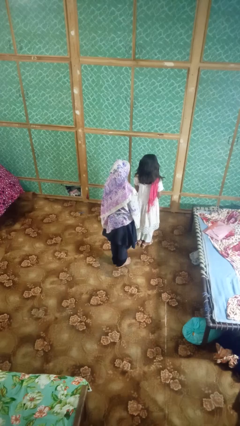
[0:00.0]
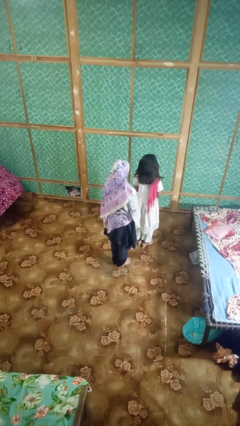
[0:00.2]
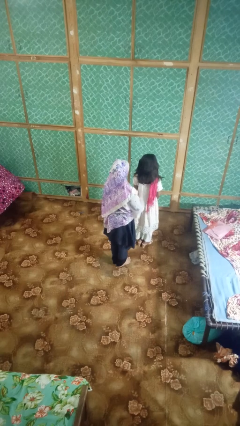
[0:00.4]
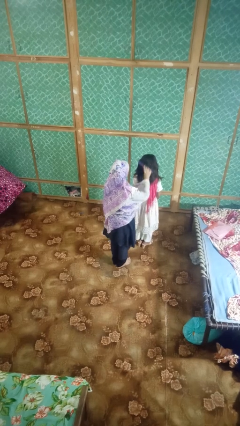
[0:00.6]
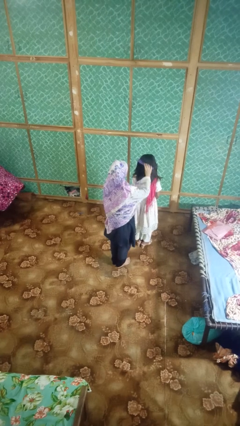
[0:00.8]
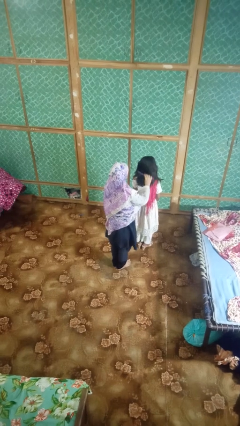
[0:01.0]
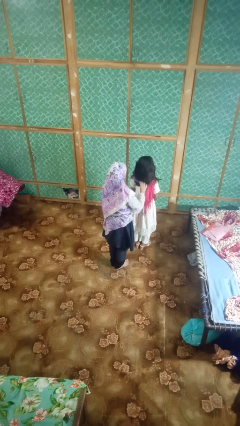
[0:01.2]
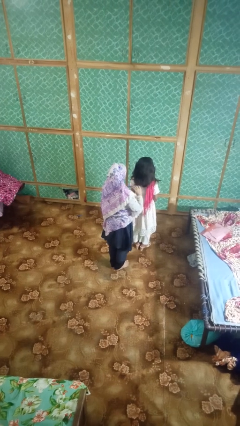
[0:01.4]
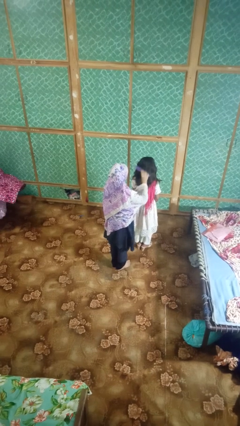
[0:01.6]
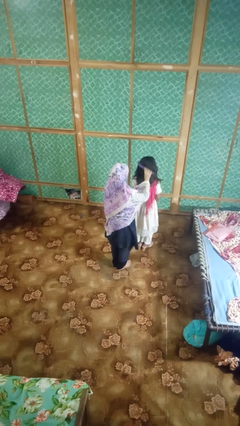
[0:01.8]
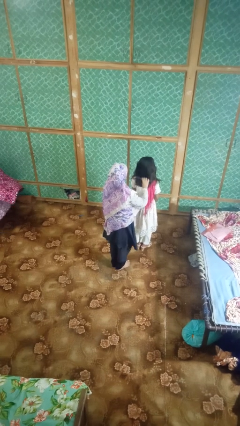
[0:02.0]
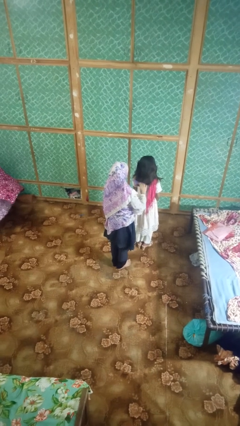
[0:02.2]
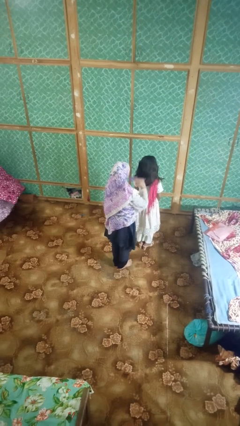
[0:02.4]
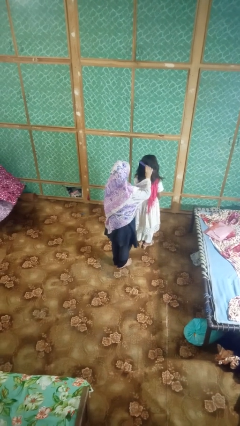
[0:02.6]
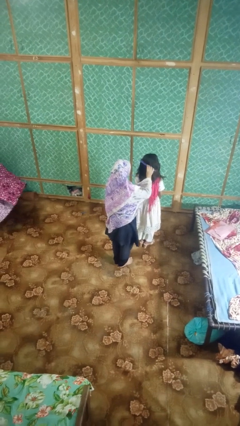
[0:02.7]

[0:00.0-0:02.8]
person brushes hair of person

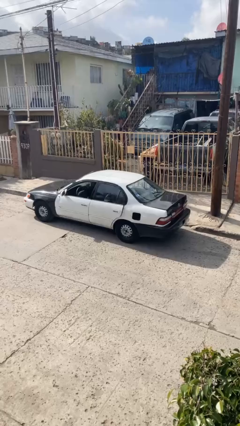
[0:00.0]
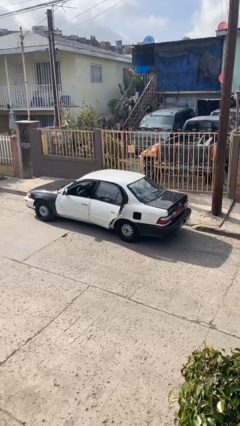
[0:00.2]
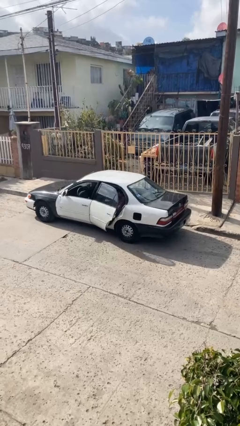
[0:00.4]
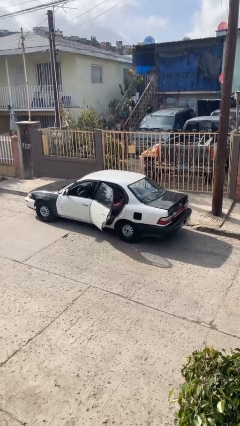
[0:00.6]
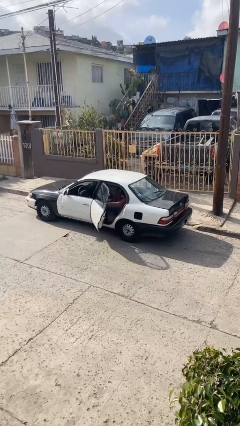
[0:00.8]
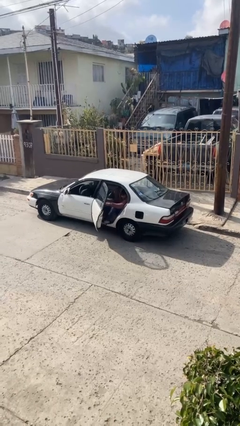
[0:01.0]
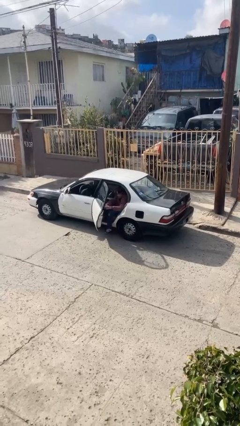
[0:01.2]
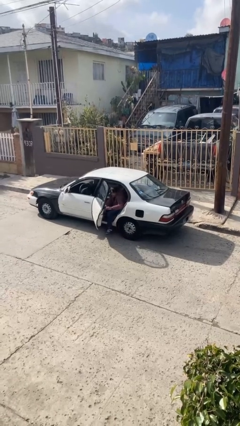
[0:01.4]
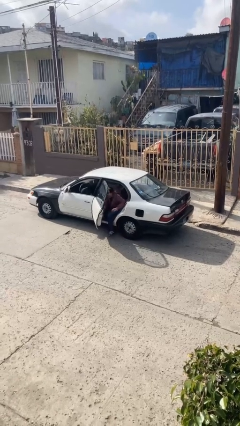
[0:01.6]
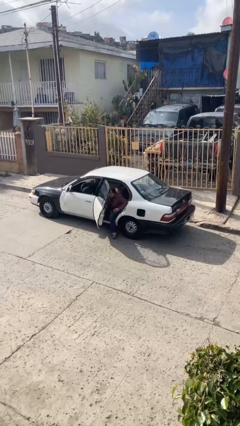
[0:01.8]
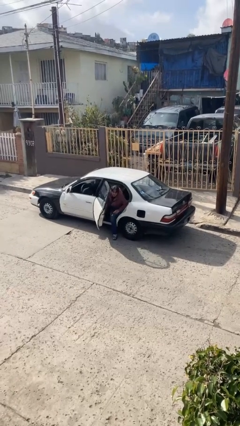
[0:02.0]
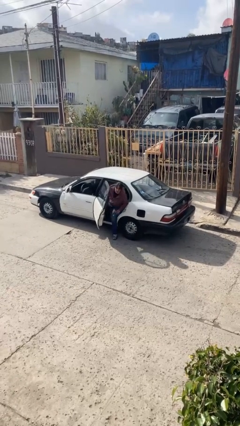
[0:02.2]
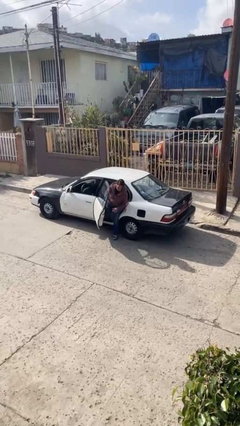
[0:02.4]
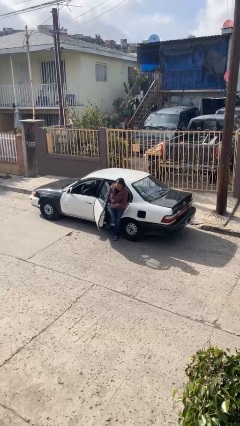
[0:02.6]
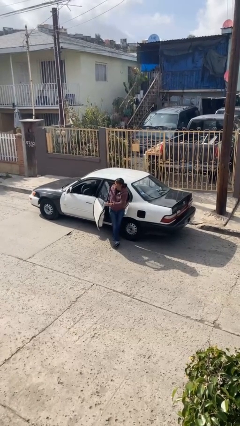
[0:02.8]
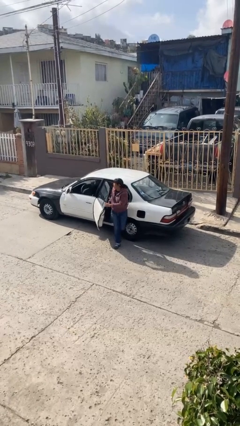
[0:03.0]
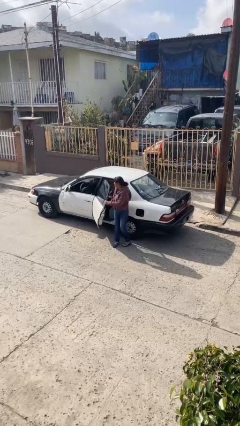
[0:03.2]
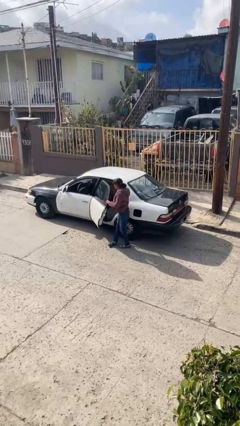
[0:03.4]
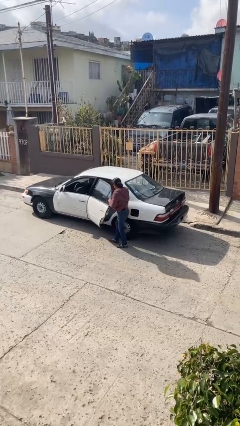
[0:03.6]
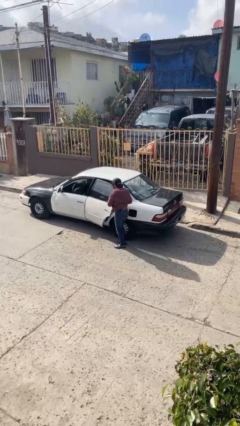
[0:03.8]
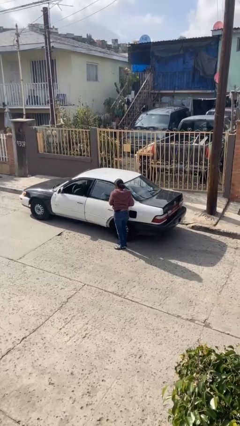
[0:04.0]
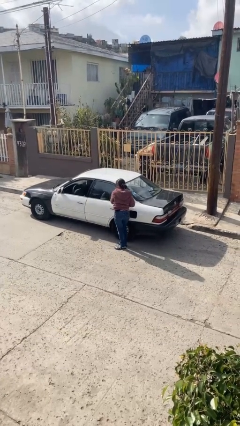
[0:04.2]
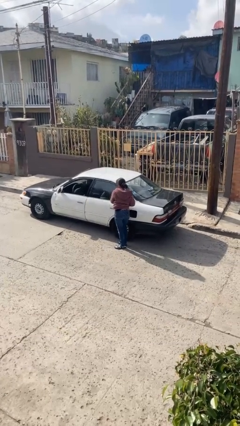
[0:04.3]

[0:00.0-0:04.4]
person exits car

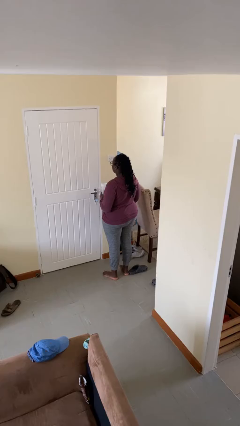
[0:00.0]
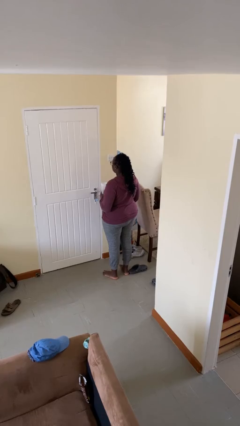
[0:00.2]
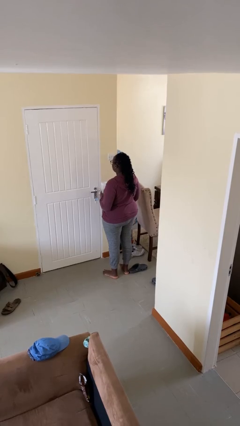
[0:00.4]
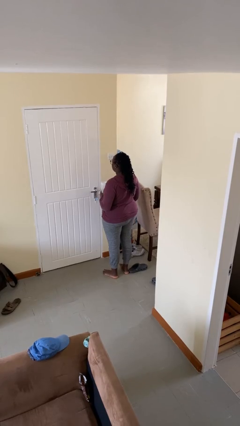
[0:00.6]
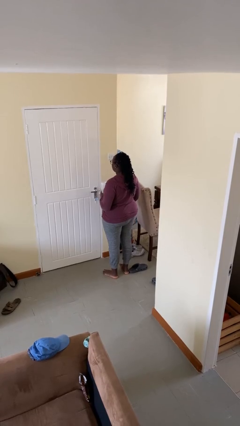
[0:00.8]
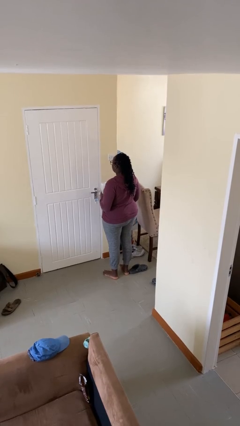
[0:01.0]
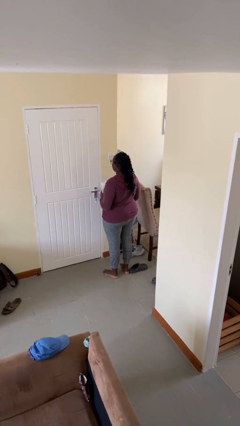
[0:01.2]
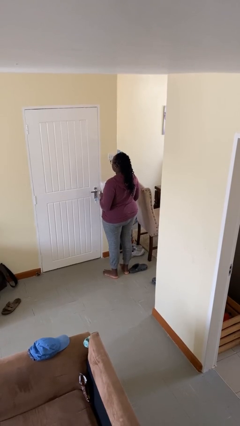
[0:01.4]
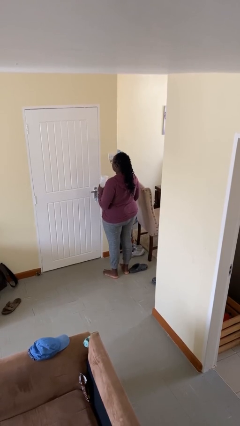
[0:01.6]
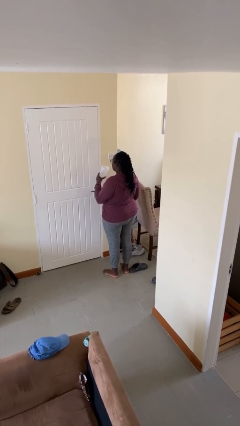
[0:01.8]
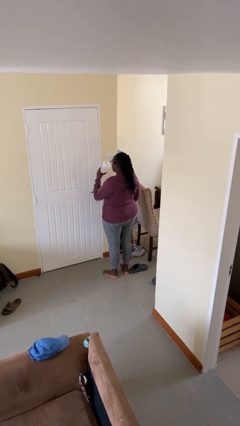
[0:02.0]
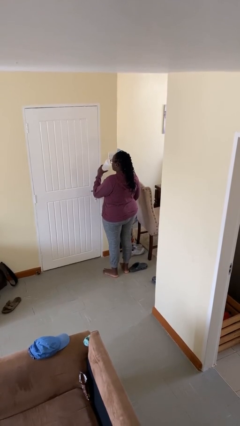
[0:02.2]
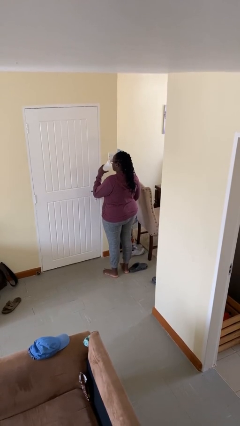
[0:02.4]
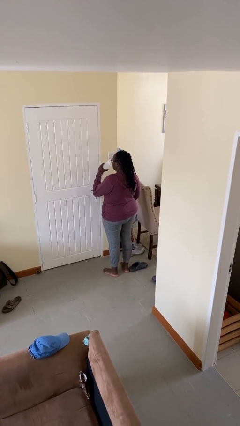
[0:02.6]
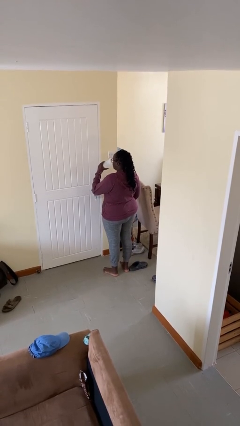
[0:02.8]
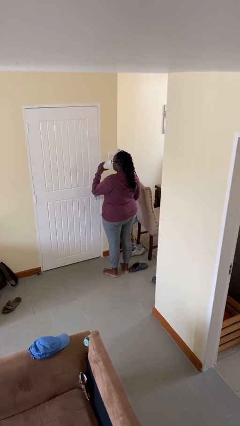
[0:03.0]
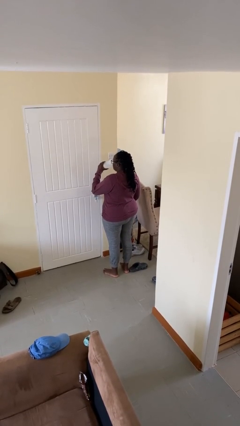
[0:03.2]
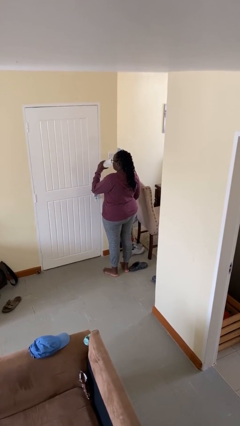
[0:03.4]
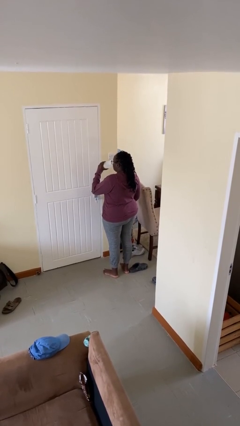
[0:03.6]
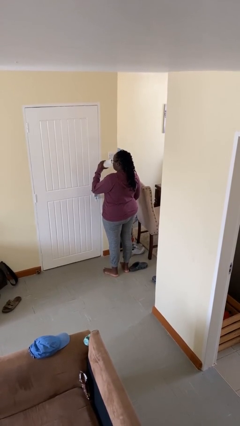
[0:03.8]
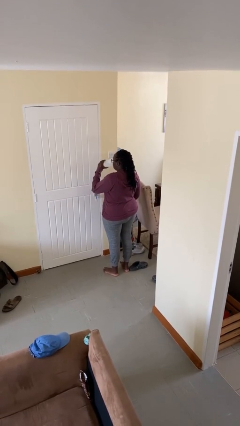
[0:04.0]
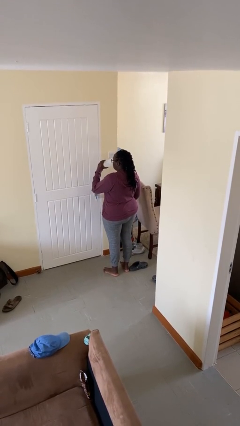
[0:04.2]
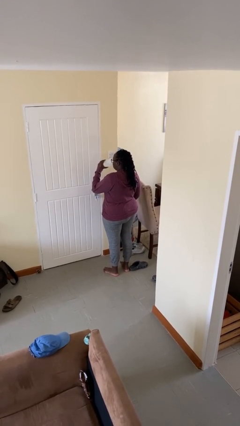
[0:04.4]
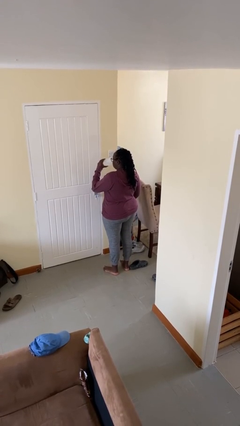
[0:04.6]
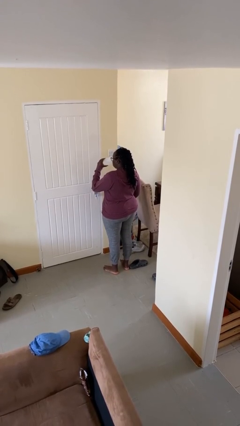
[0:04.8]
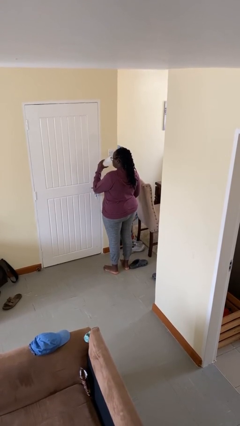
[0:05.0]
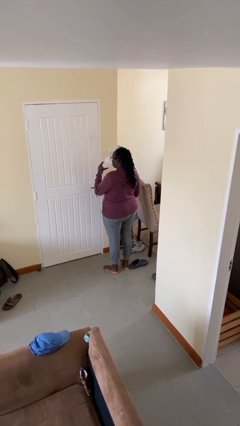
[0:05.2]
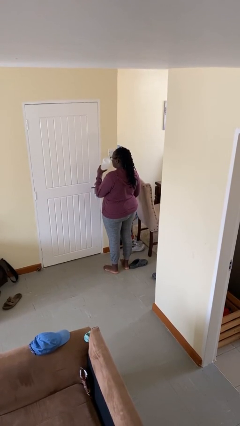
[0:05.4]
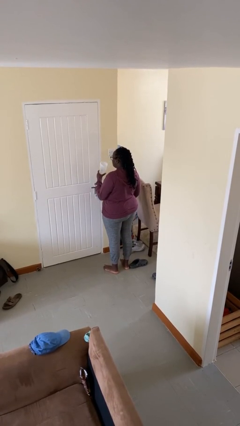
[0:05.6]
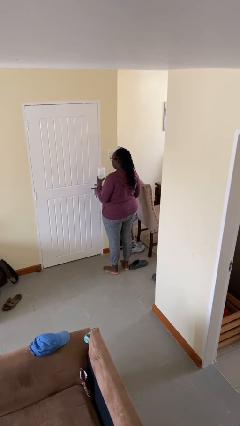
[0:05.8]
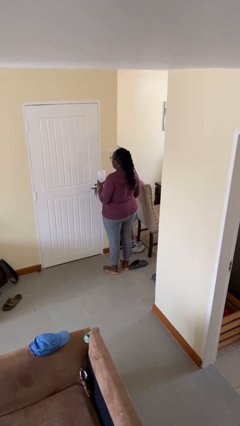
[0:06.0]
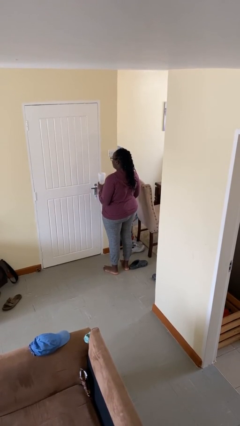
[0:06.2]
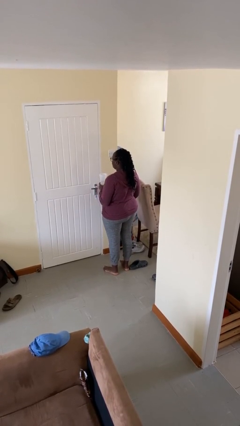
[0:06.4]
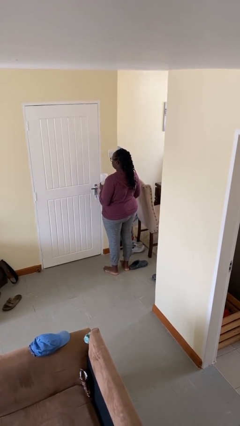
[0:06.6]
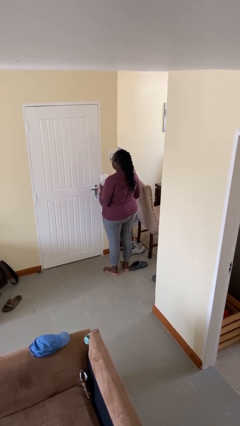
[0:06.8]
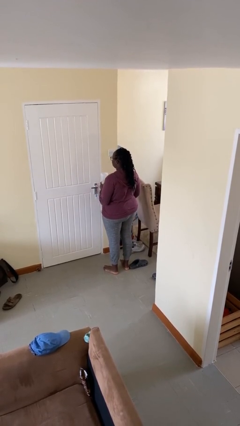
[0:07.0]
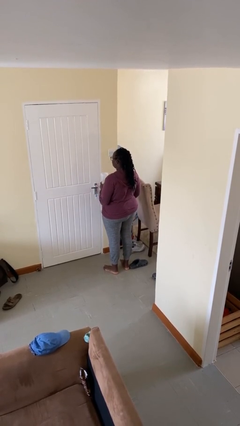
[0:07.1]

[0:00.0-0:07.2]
person drinks from bottle

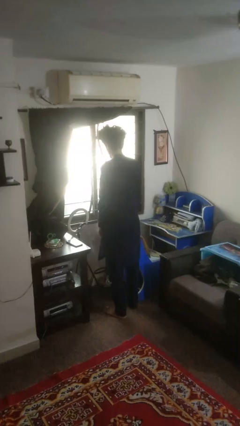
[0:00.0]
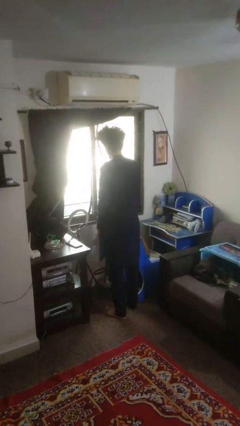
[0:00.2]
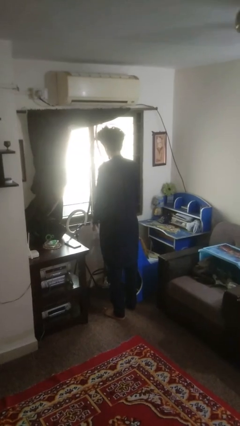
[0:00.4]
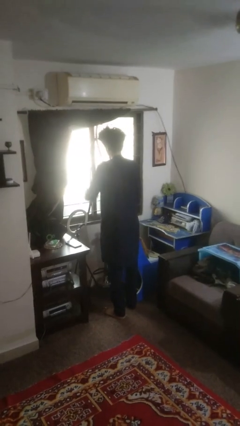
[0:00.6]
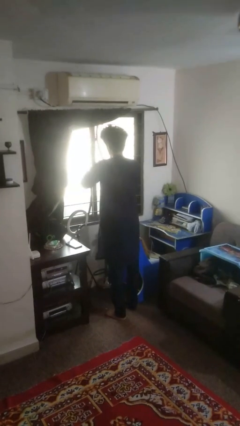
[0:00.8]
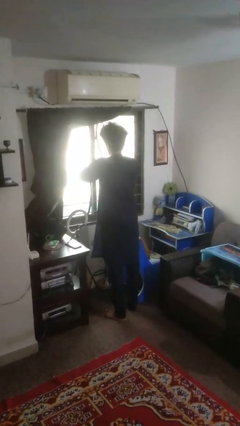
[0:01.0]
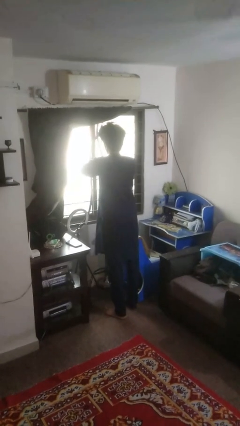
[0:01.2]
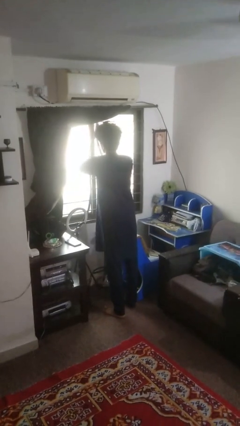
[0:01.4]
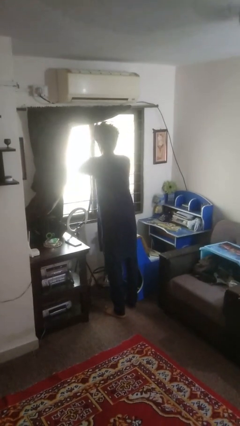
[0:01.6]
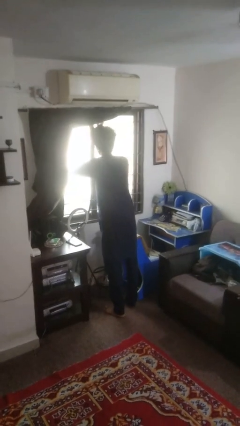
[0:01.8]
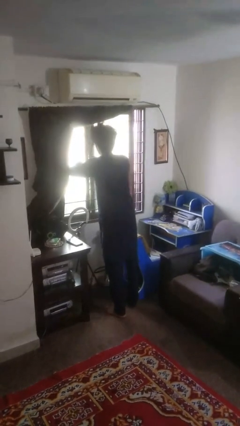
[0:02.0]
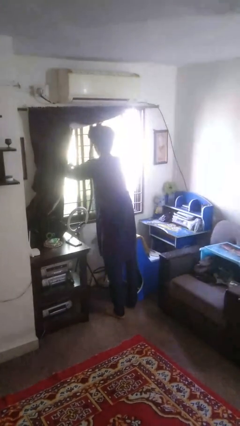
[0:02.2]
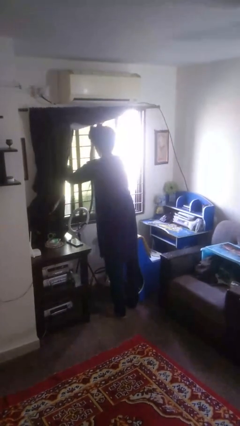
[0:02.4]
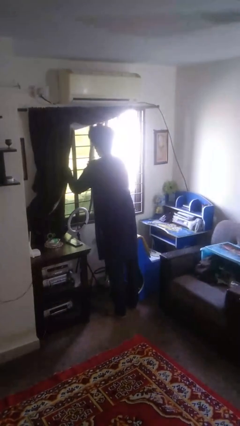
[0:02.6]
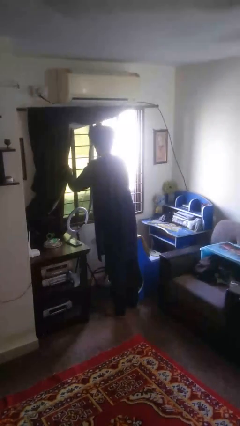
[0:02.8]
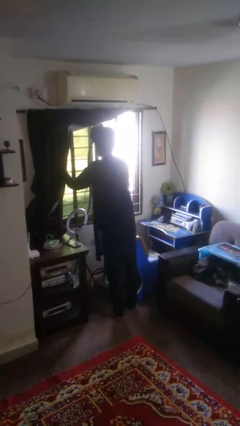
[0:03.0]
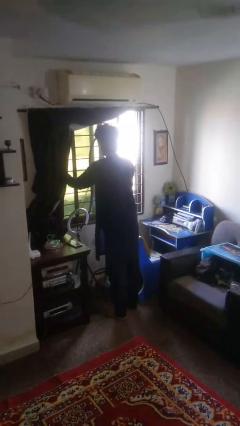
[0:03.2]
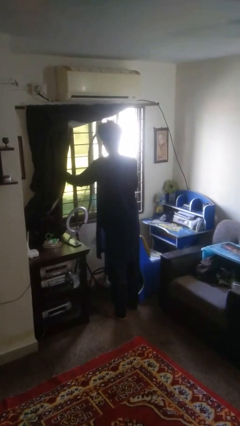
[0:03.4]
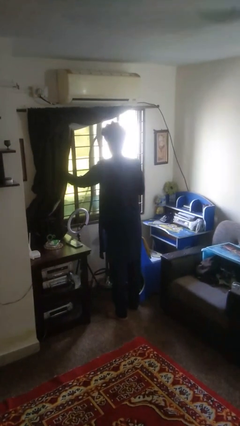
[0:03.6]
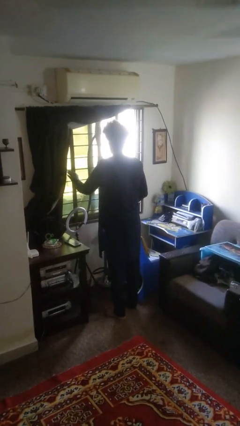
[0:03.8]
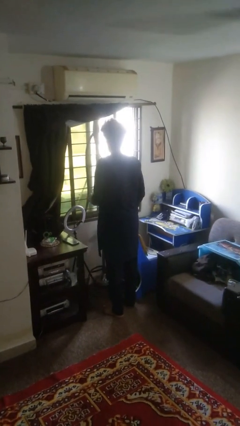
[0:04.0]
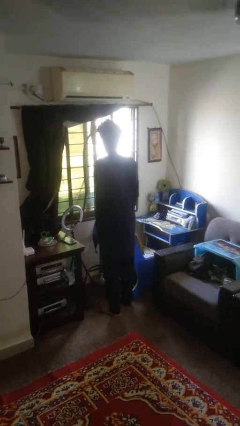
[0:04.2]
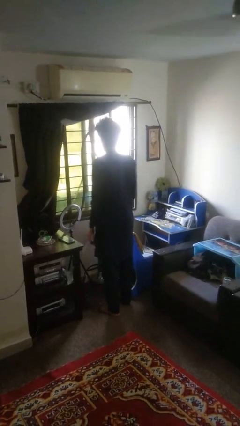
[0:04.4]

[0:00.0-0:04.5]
person opens home window
